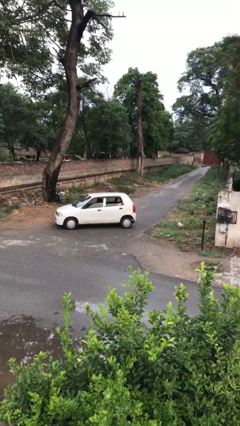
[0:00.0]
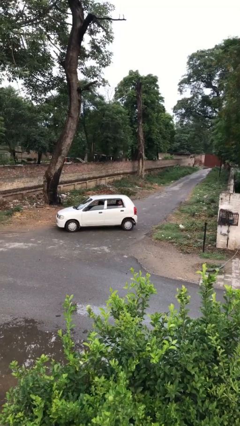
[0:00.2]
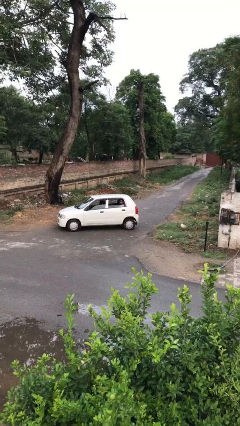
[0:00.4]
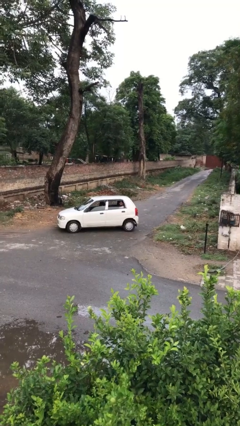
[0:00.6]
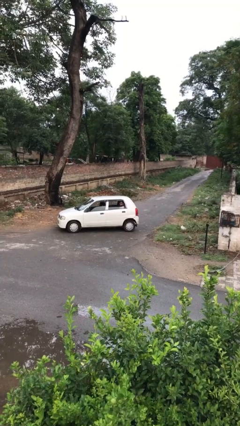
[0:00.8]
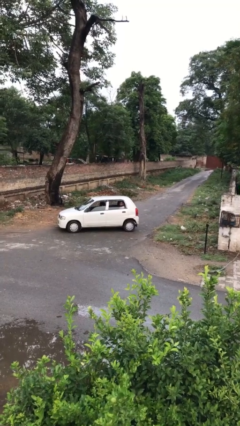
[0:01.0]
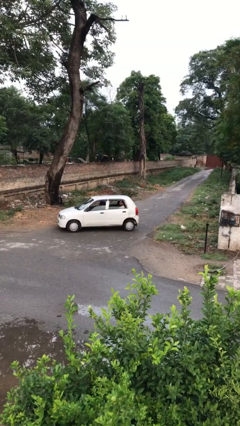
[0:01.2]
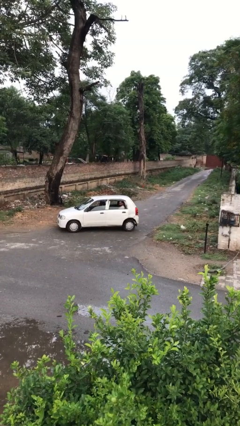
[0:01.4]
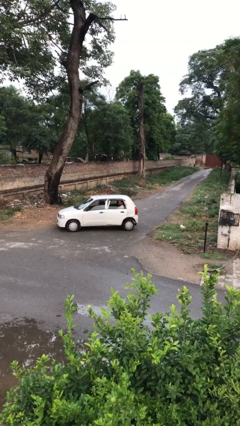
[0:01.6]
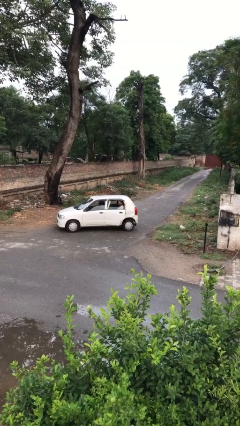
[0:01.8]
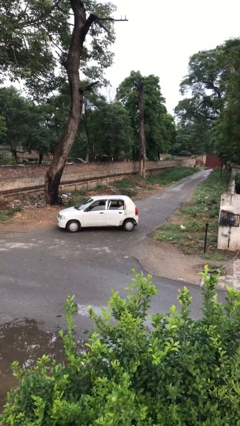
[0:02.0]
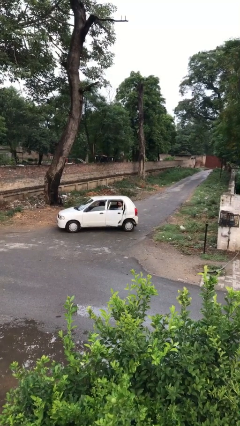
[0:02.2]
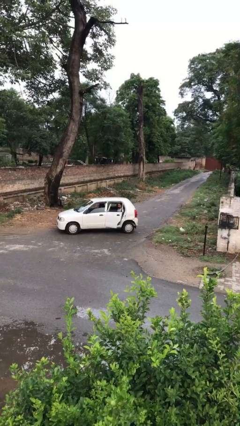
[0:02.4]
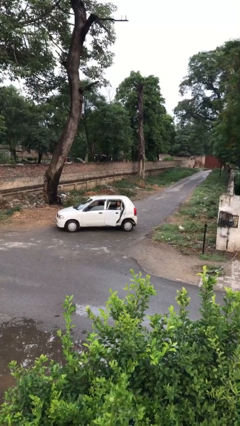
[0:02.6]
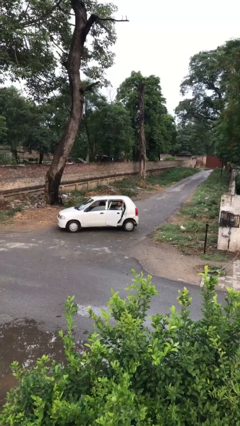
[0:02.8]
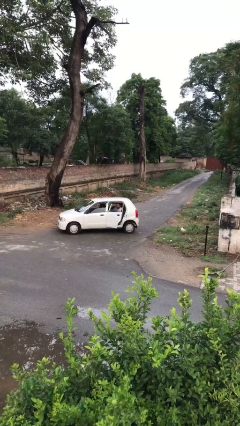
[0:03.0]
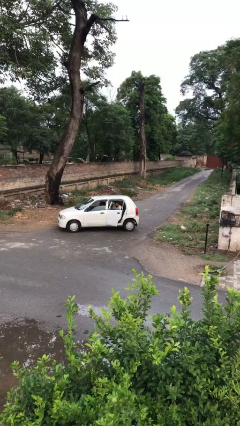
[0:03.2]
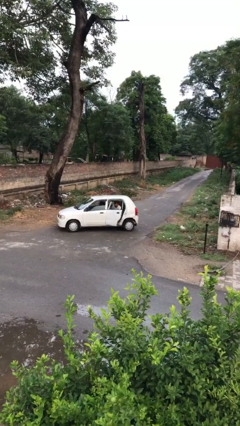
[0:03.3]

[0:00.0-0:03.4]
person opens car door

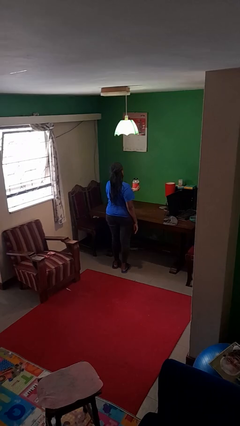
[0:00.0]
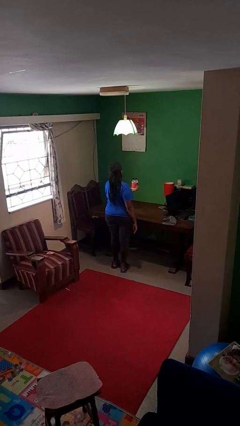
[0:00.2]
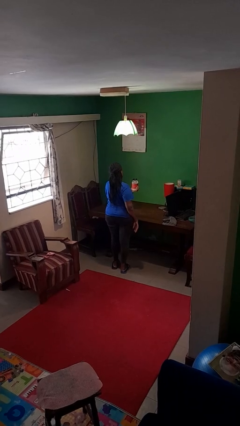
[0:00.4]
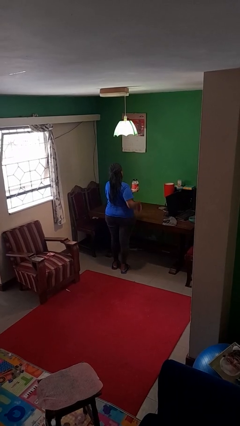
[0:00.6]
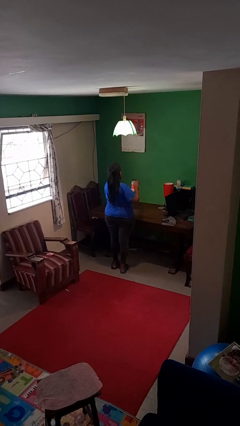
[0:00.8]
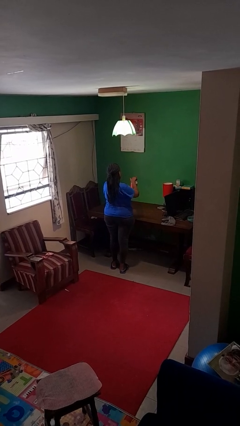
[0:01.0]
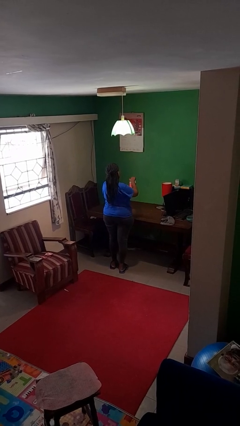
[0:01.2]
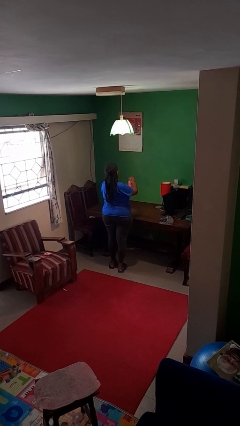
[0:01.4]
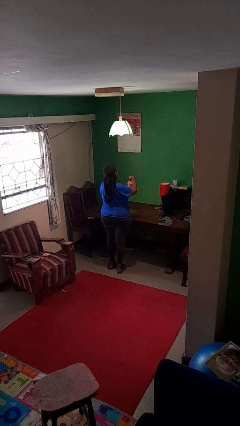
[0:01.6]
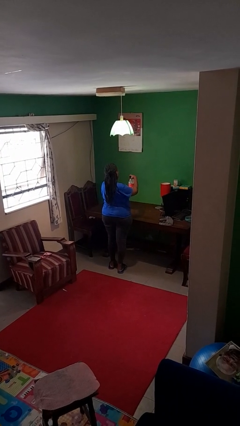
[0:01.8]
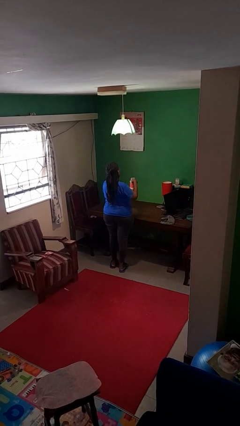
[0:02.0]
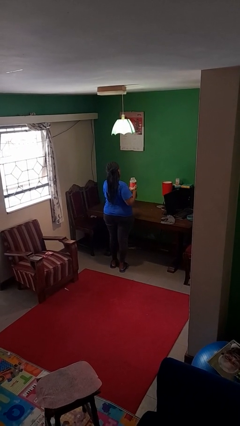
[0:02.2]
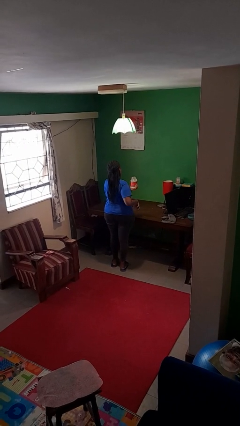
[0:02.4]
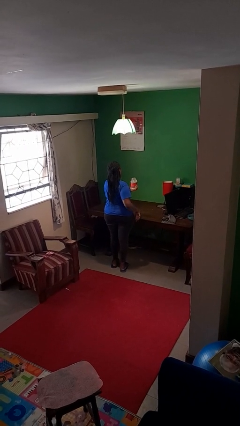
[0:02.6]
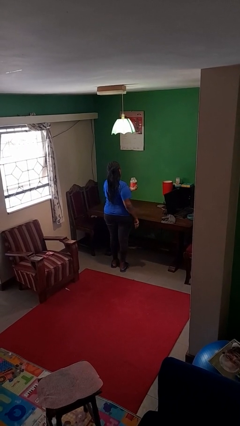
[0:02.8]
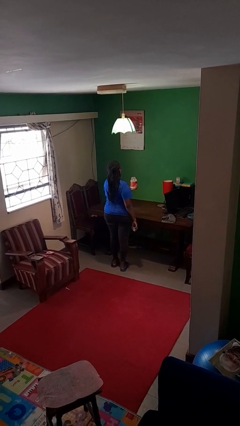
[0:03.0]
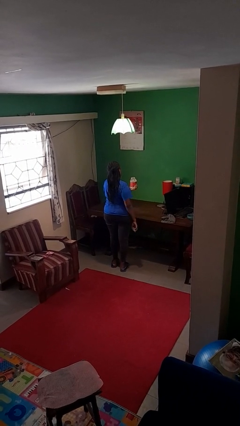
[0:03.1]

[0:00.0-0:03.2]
person opens jar

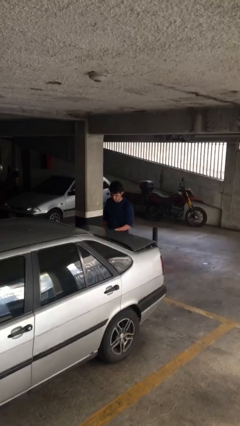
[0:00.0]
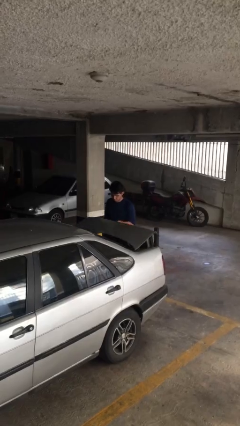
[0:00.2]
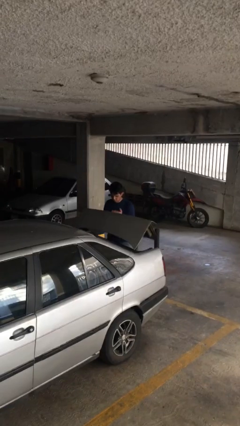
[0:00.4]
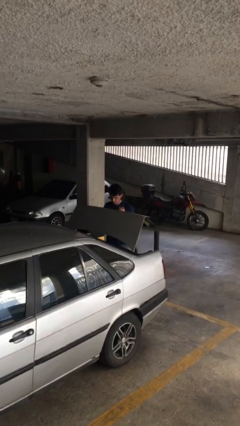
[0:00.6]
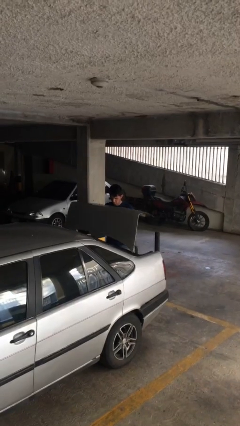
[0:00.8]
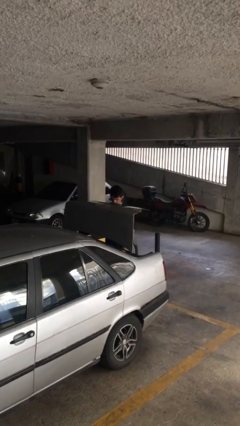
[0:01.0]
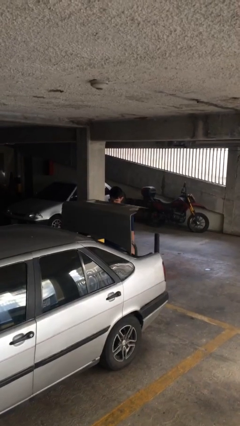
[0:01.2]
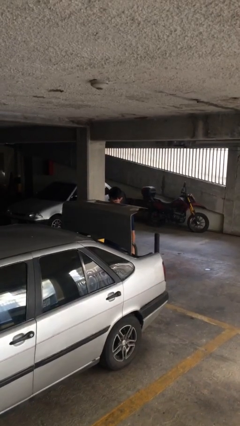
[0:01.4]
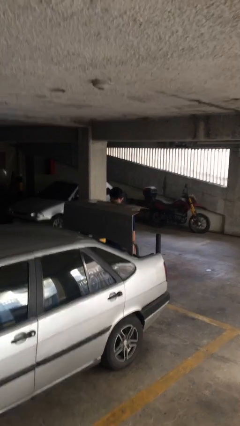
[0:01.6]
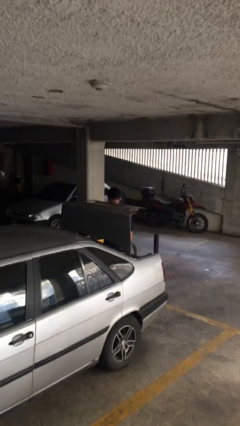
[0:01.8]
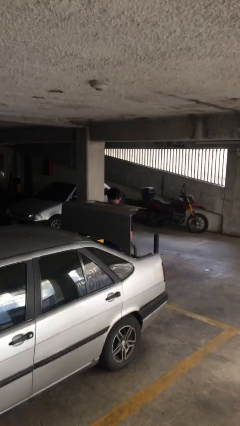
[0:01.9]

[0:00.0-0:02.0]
person opens car trunk

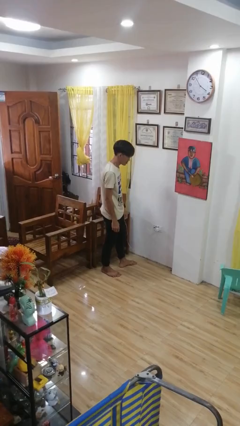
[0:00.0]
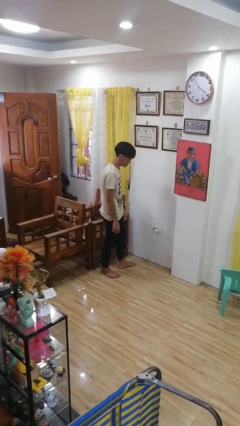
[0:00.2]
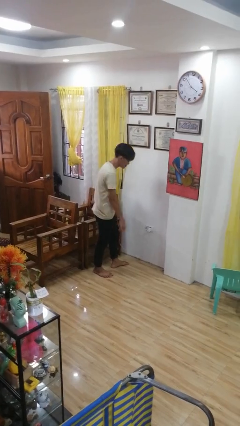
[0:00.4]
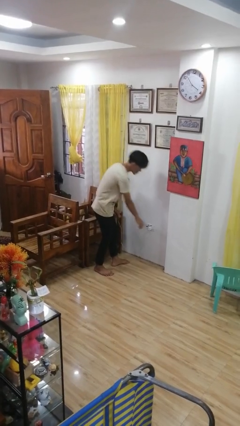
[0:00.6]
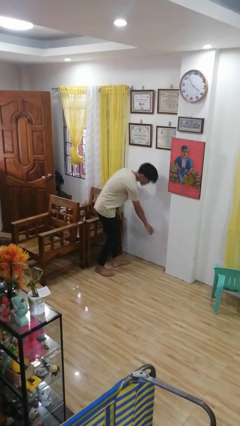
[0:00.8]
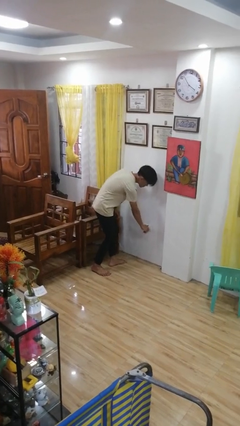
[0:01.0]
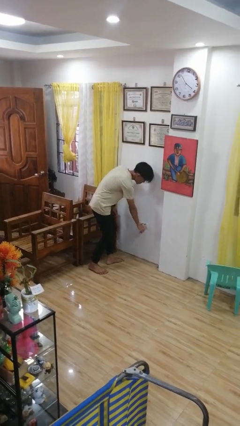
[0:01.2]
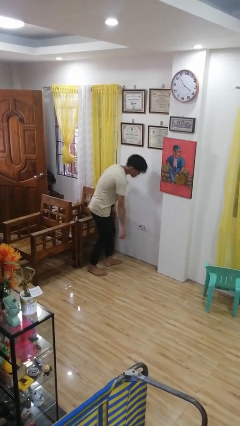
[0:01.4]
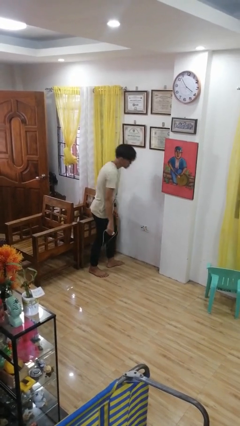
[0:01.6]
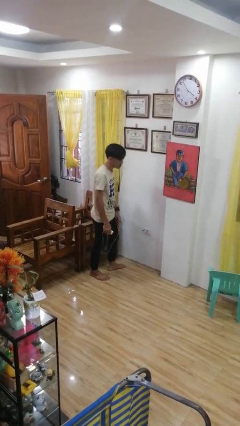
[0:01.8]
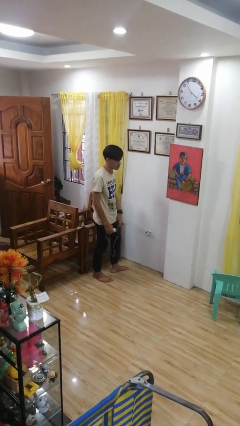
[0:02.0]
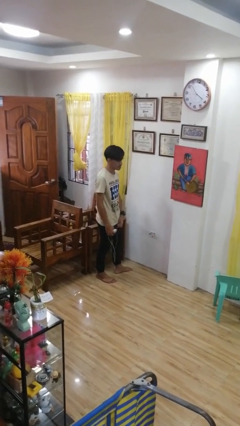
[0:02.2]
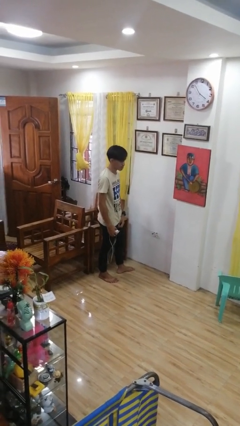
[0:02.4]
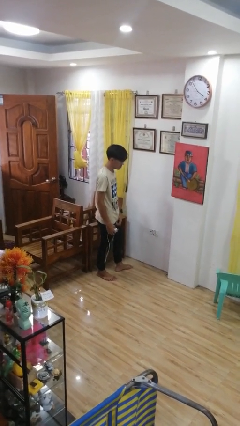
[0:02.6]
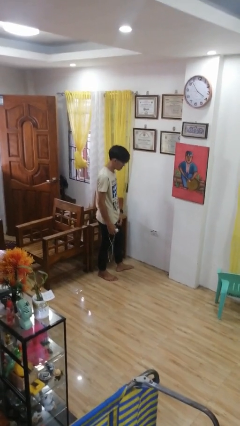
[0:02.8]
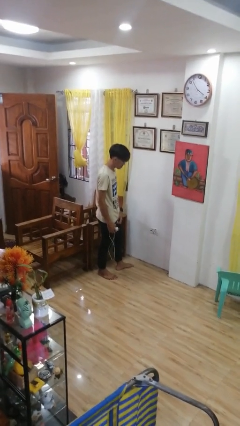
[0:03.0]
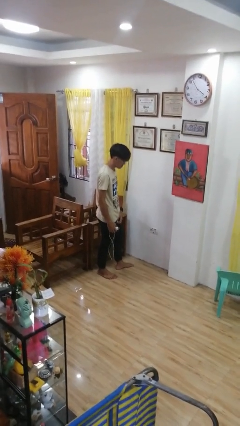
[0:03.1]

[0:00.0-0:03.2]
person unplugs from electrical socket

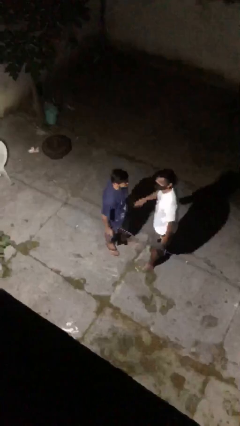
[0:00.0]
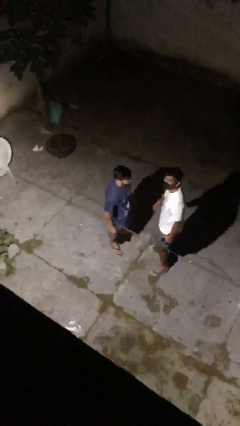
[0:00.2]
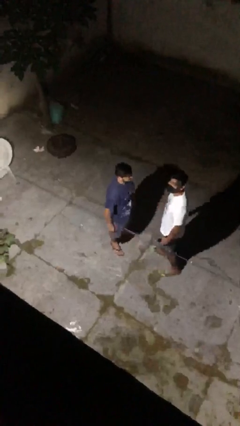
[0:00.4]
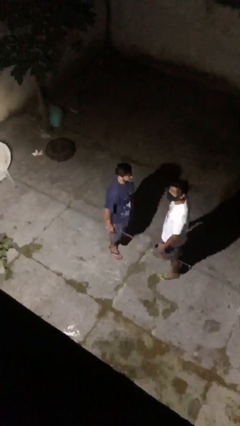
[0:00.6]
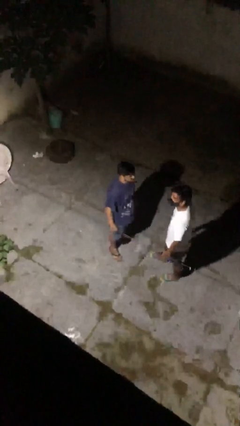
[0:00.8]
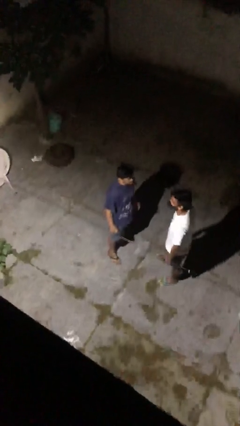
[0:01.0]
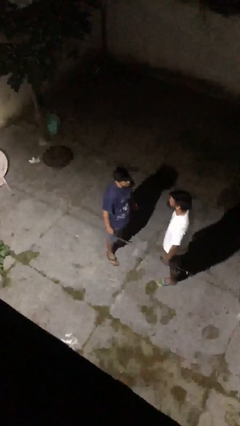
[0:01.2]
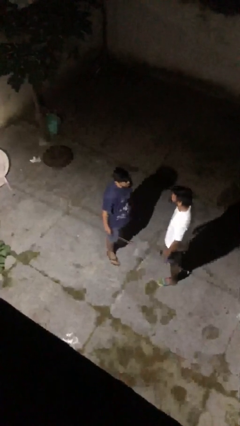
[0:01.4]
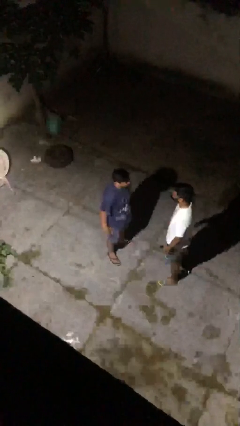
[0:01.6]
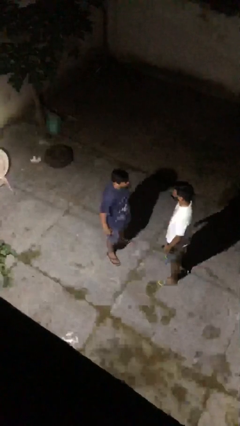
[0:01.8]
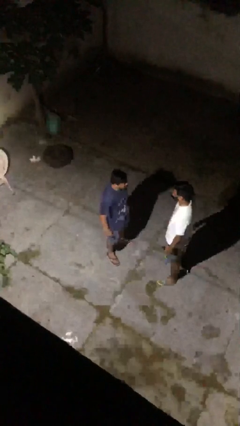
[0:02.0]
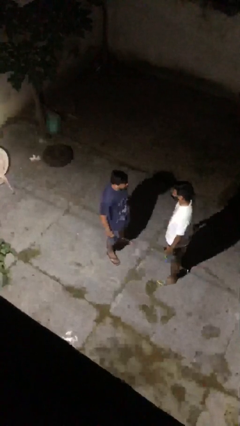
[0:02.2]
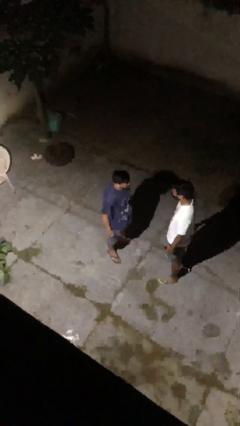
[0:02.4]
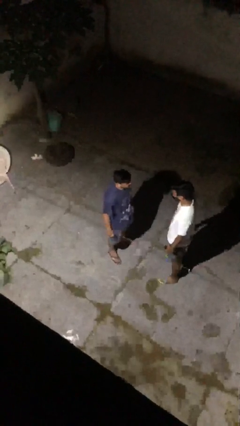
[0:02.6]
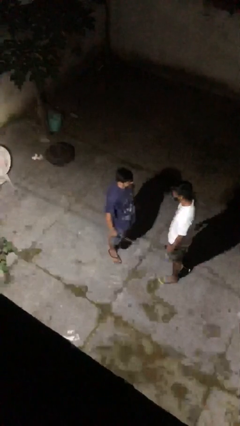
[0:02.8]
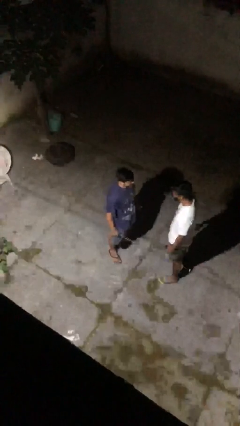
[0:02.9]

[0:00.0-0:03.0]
person talks to person

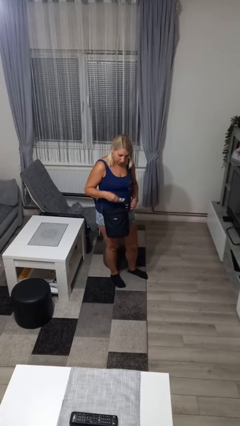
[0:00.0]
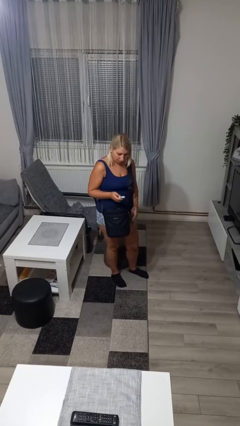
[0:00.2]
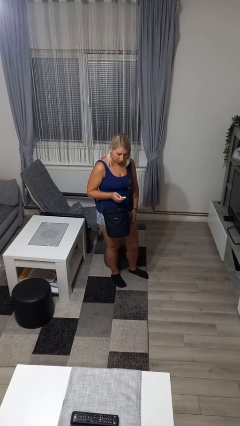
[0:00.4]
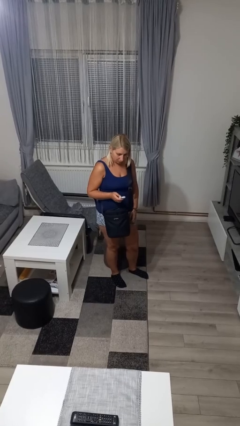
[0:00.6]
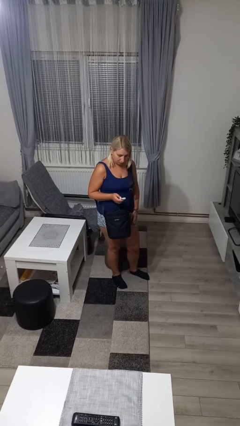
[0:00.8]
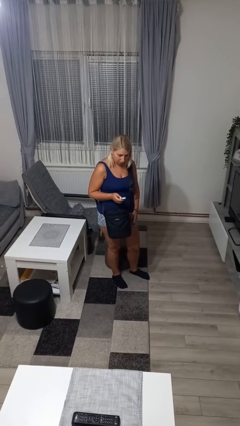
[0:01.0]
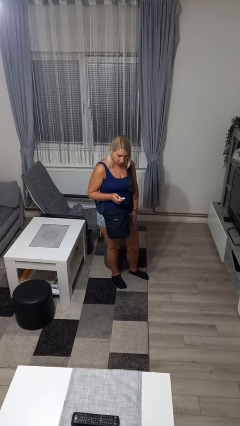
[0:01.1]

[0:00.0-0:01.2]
person takes object from purse

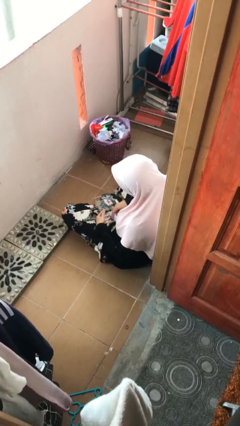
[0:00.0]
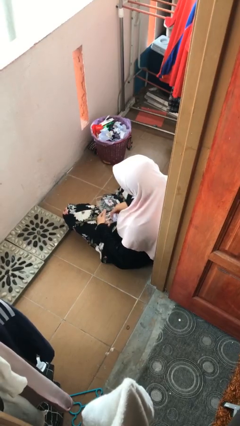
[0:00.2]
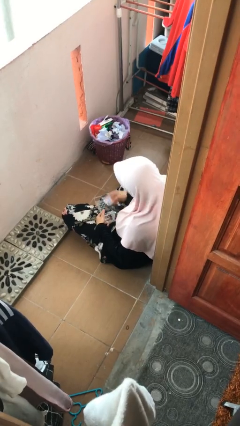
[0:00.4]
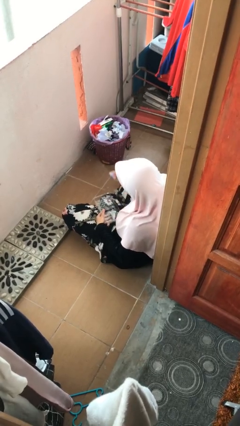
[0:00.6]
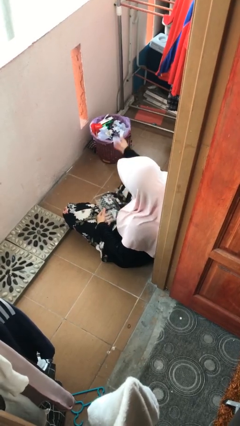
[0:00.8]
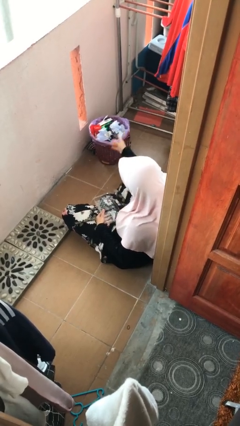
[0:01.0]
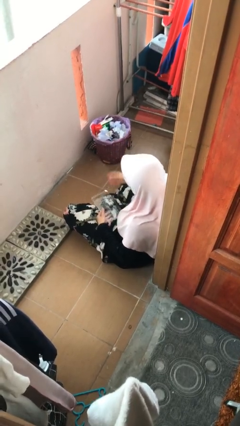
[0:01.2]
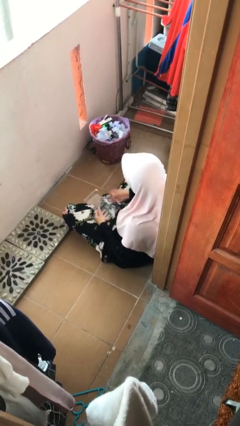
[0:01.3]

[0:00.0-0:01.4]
person discards trash
